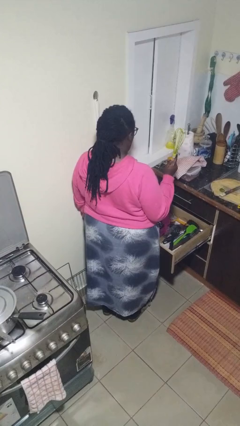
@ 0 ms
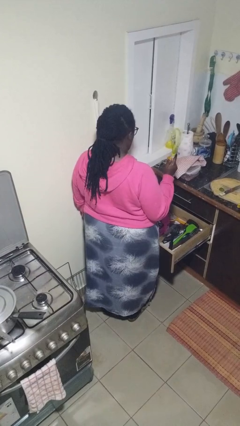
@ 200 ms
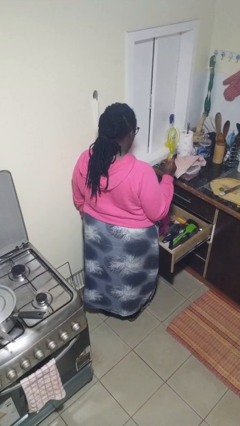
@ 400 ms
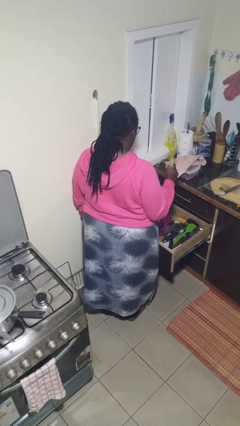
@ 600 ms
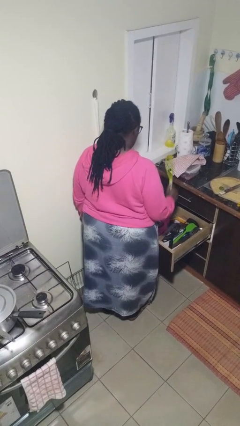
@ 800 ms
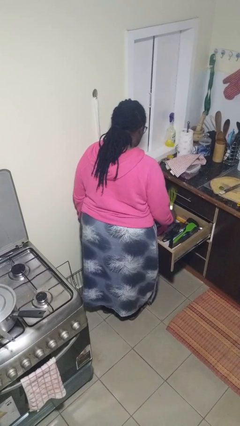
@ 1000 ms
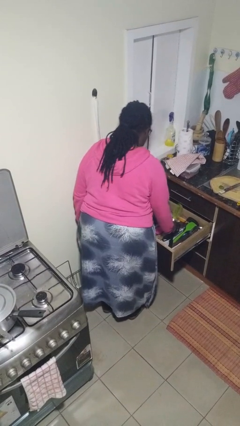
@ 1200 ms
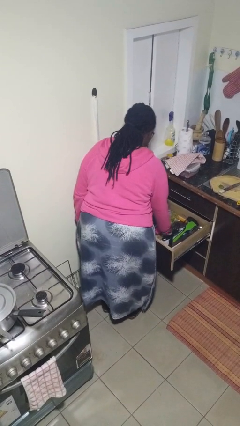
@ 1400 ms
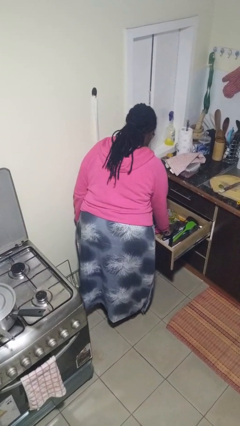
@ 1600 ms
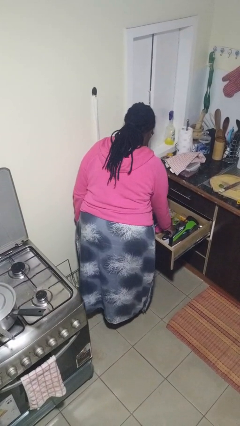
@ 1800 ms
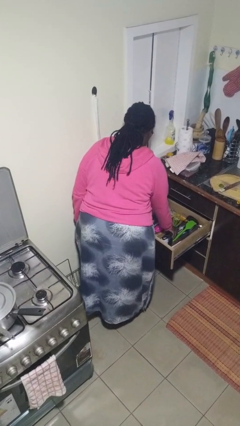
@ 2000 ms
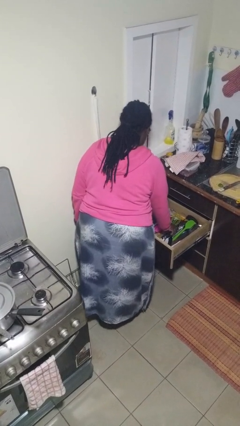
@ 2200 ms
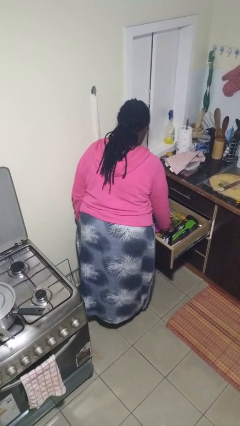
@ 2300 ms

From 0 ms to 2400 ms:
person puts object into kitchen drawer

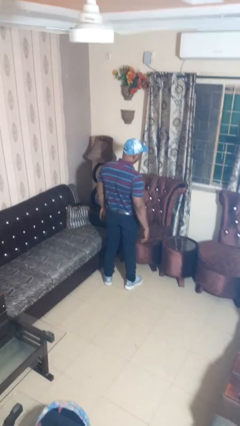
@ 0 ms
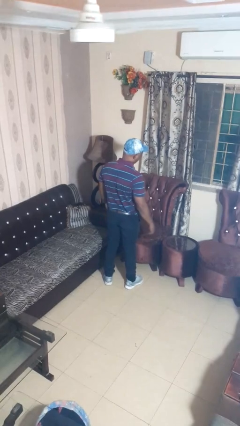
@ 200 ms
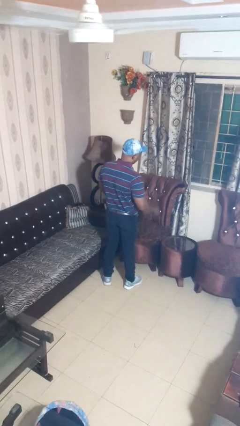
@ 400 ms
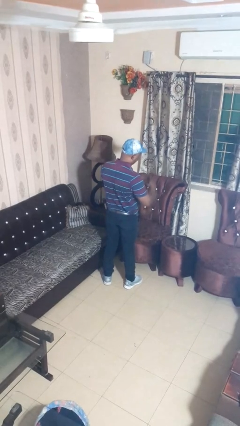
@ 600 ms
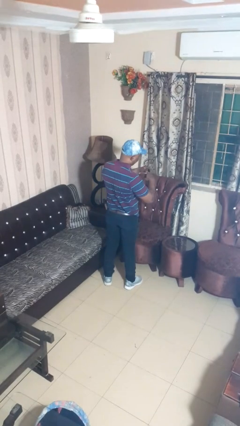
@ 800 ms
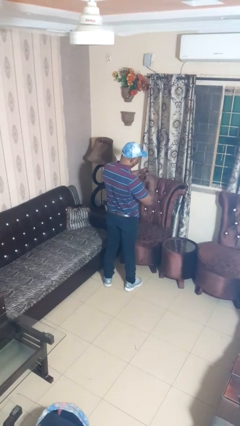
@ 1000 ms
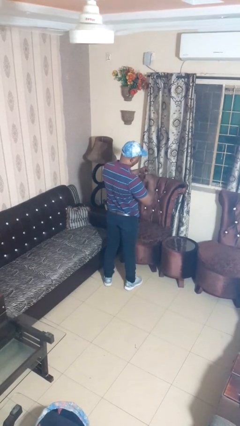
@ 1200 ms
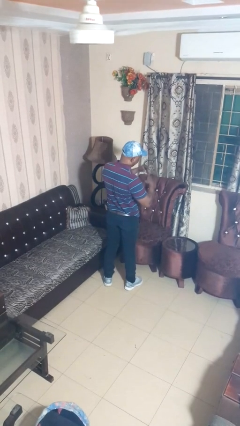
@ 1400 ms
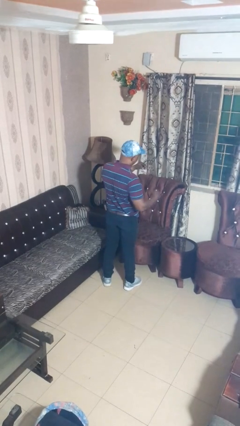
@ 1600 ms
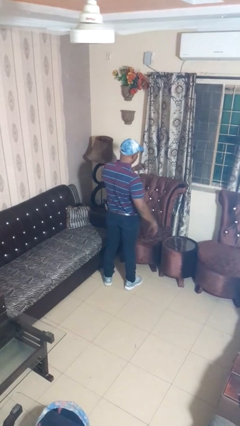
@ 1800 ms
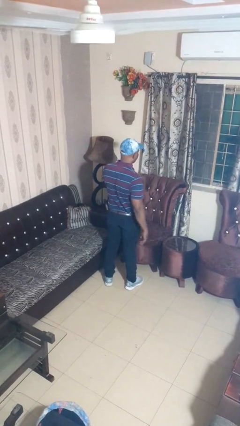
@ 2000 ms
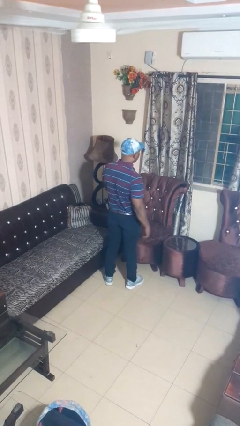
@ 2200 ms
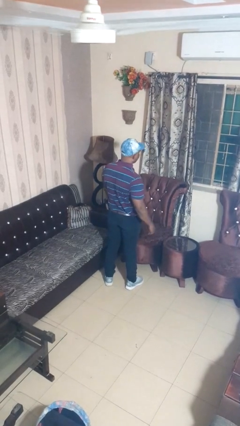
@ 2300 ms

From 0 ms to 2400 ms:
person takes off ring

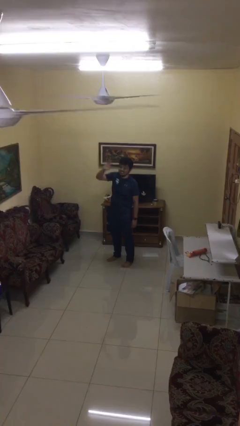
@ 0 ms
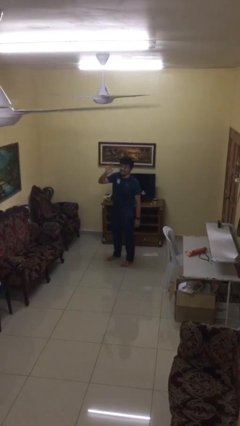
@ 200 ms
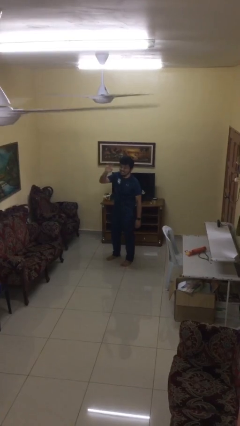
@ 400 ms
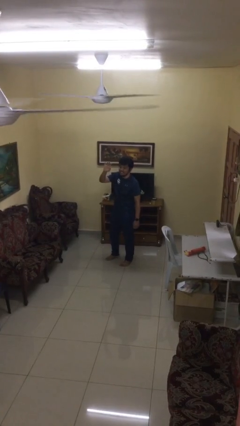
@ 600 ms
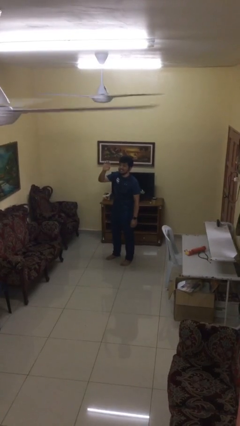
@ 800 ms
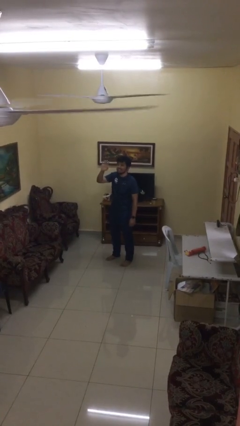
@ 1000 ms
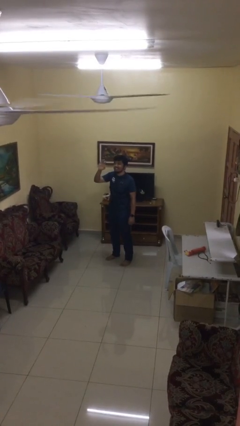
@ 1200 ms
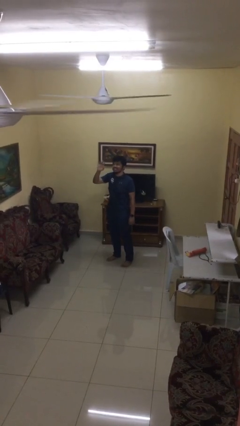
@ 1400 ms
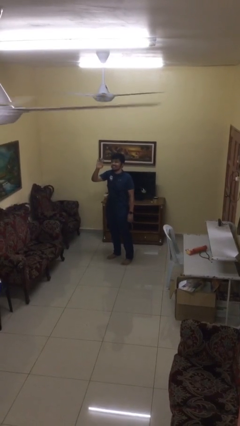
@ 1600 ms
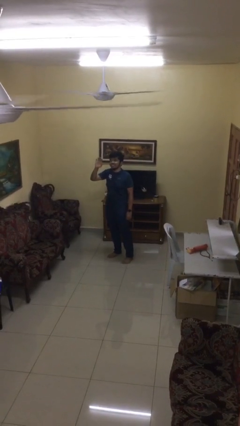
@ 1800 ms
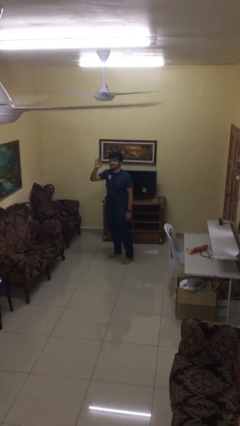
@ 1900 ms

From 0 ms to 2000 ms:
person gestures lower hand

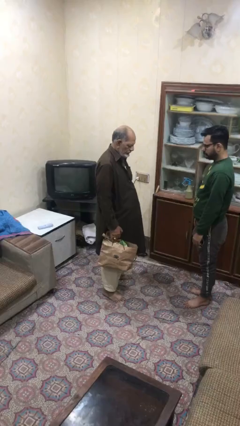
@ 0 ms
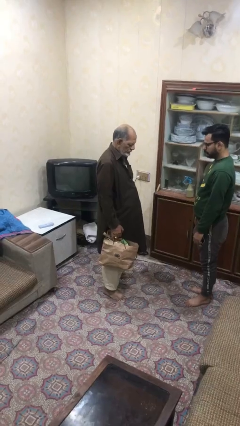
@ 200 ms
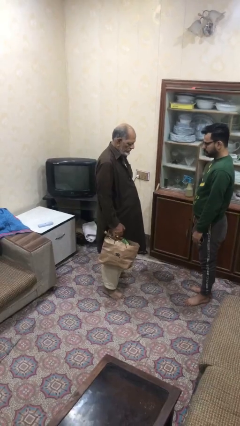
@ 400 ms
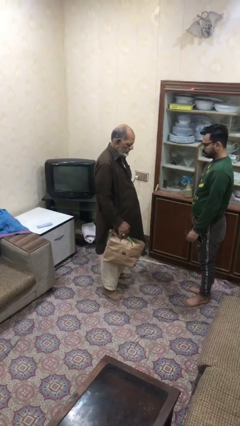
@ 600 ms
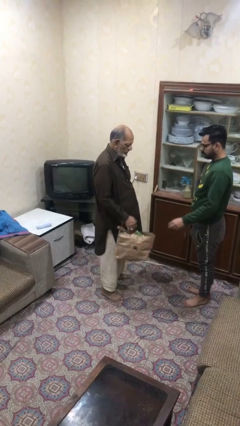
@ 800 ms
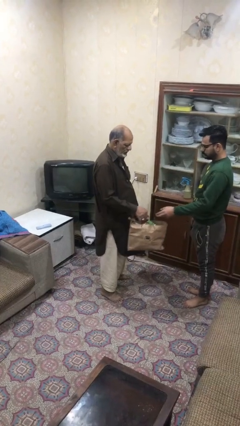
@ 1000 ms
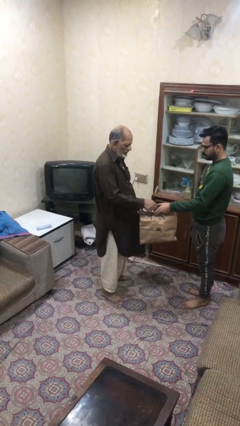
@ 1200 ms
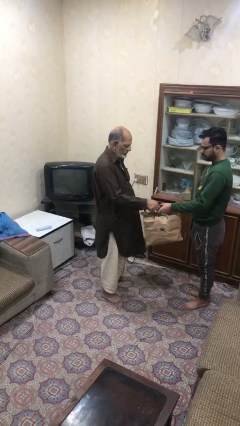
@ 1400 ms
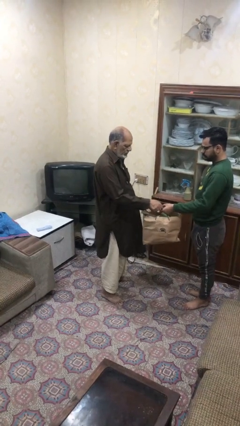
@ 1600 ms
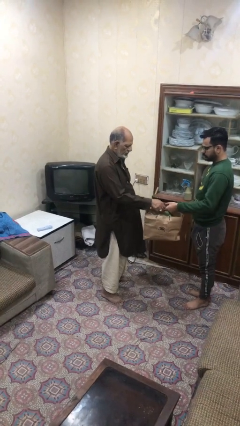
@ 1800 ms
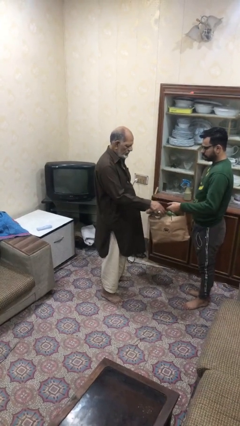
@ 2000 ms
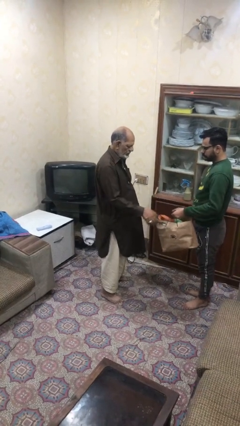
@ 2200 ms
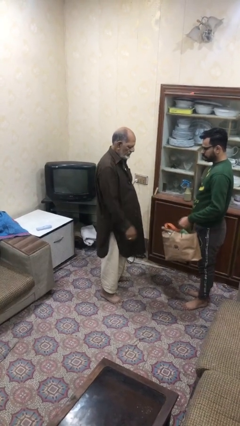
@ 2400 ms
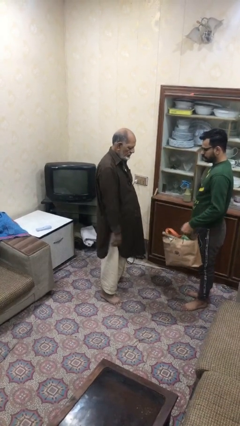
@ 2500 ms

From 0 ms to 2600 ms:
person transfers object to person

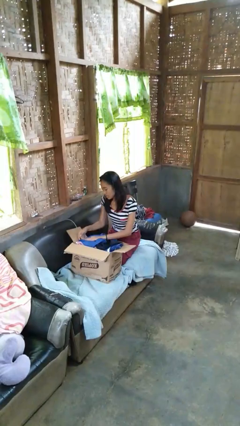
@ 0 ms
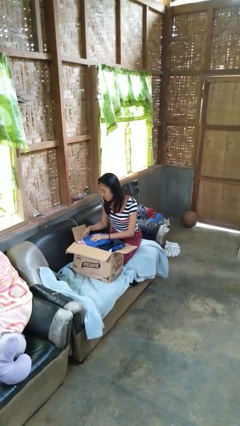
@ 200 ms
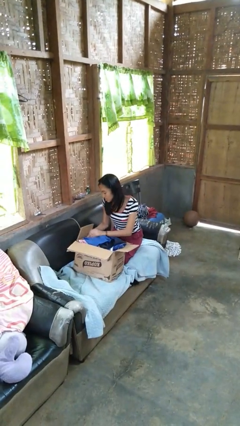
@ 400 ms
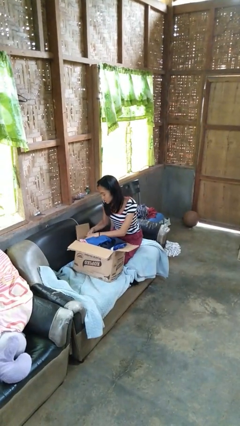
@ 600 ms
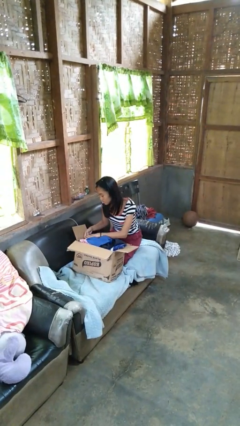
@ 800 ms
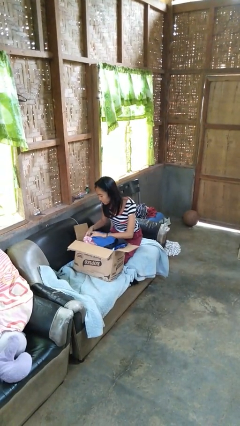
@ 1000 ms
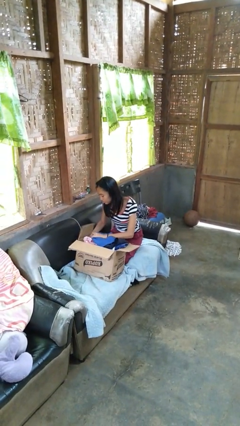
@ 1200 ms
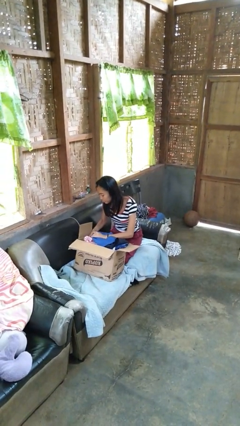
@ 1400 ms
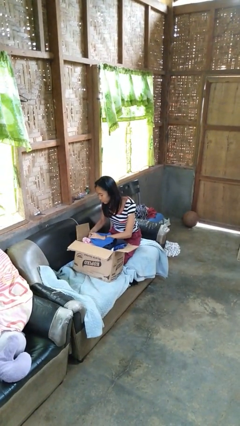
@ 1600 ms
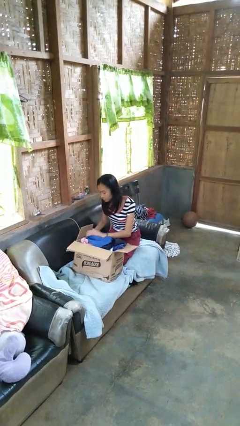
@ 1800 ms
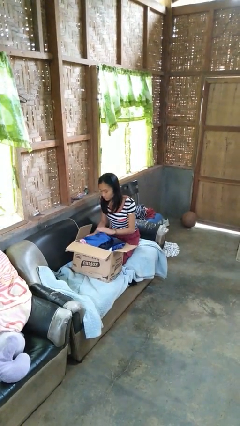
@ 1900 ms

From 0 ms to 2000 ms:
person searches in box

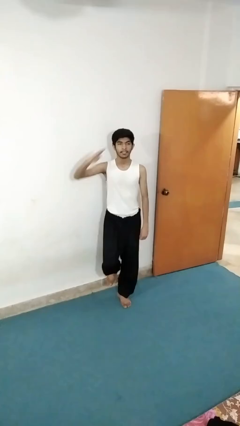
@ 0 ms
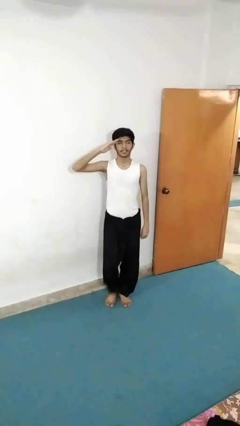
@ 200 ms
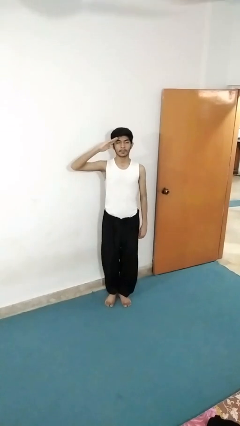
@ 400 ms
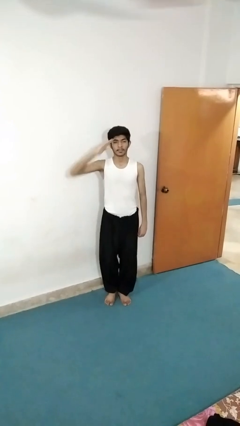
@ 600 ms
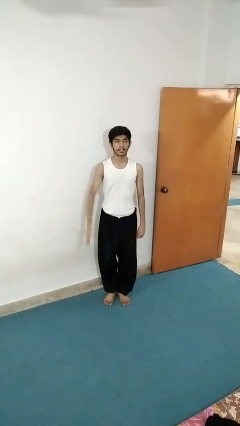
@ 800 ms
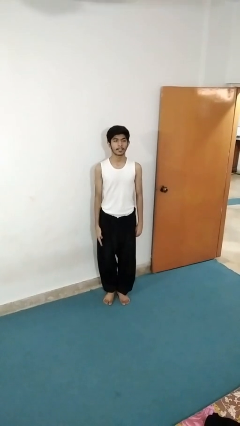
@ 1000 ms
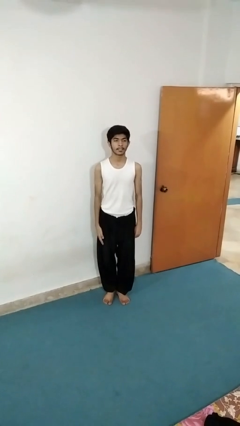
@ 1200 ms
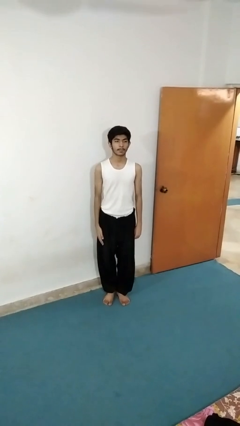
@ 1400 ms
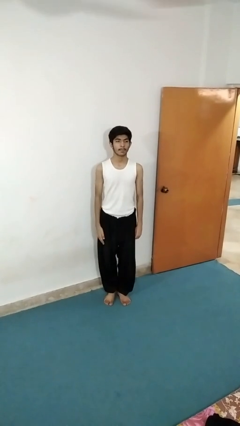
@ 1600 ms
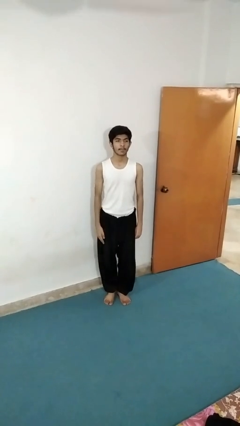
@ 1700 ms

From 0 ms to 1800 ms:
person salutes

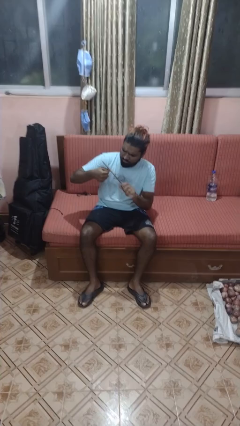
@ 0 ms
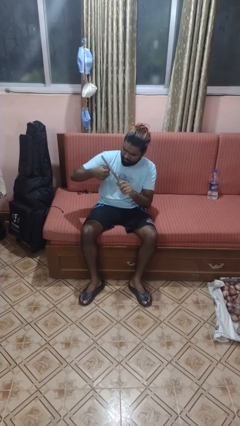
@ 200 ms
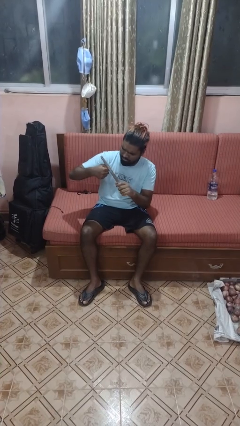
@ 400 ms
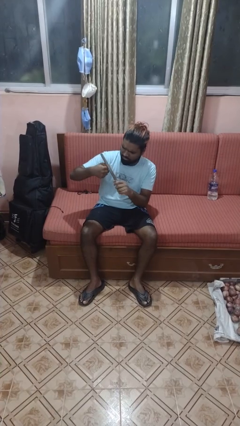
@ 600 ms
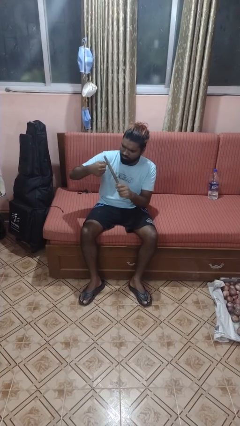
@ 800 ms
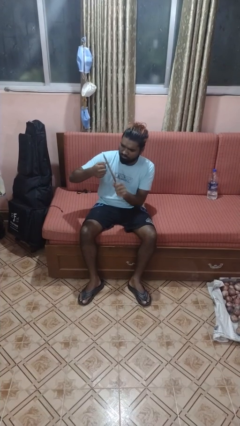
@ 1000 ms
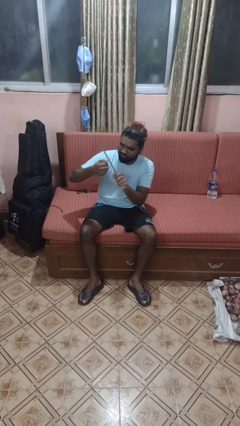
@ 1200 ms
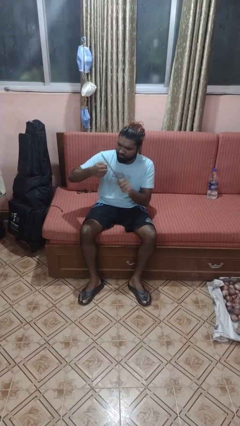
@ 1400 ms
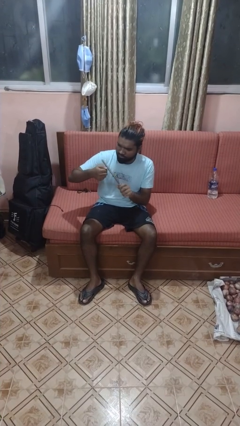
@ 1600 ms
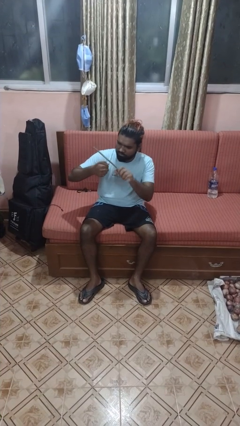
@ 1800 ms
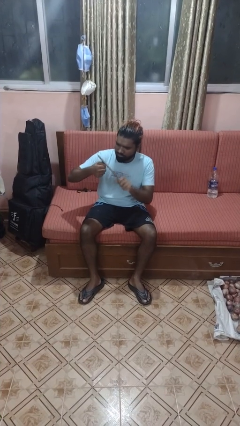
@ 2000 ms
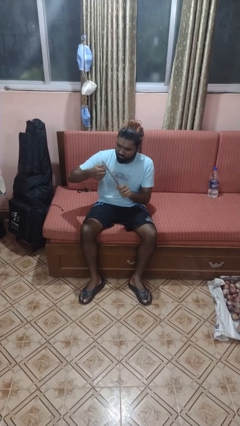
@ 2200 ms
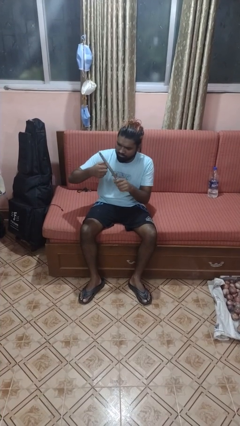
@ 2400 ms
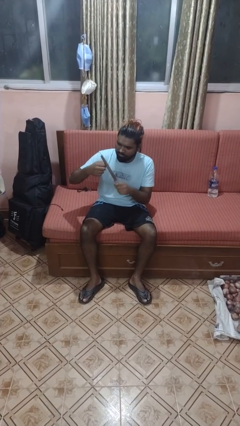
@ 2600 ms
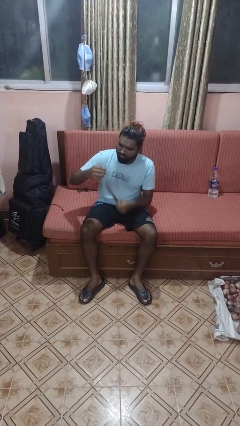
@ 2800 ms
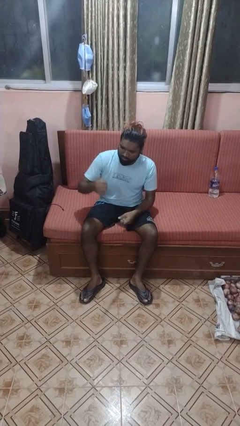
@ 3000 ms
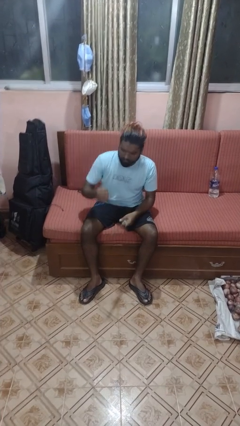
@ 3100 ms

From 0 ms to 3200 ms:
person files fingernails

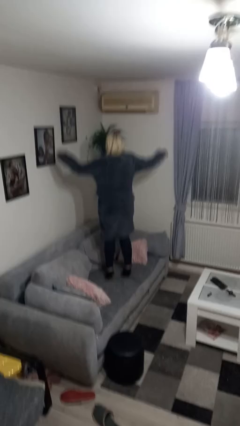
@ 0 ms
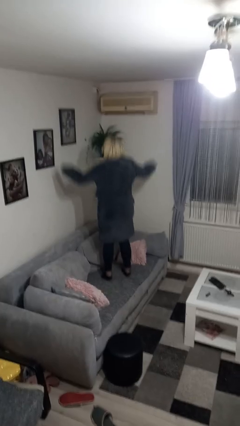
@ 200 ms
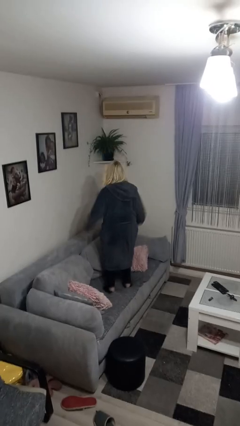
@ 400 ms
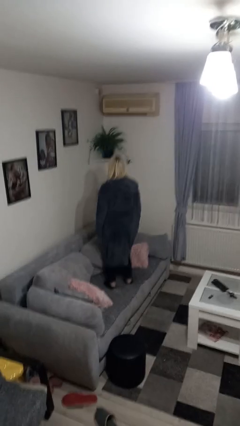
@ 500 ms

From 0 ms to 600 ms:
person jumps on couch
